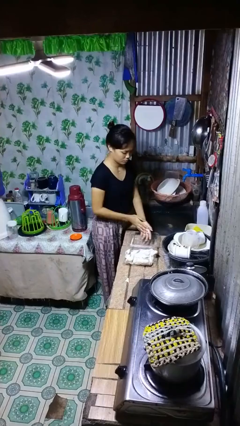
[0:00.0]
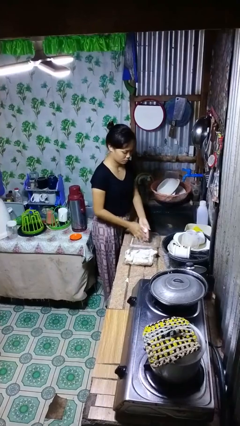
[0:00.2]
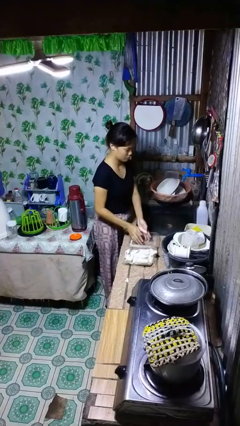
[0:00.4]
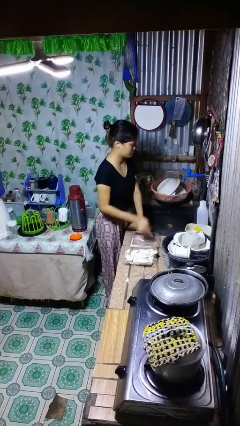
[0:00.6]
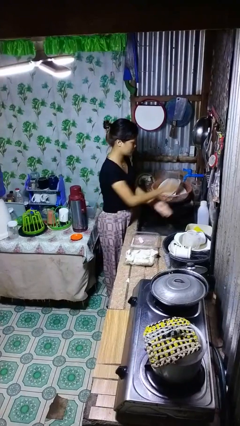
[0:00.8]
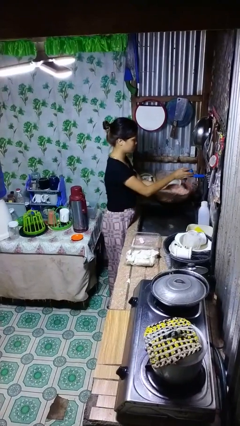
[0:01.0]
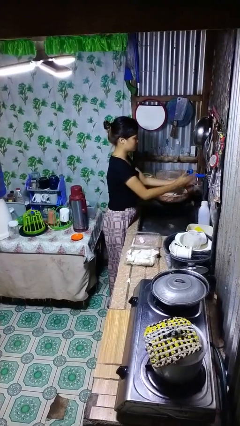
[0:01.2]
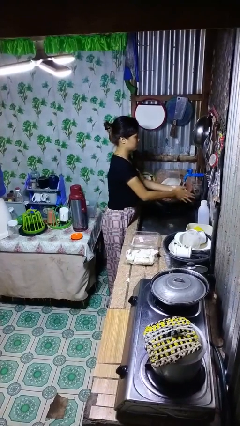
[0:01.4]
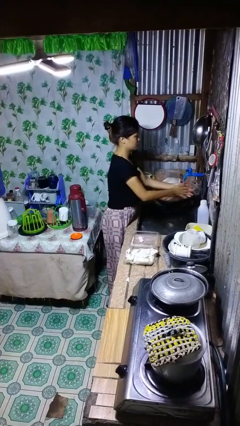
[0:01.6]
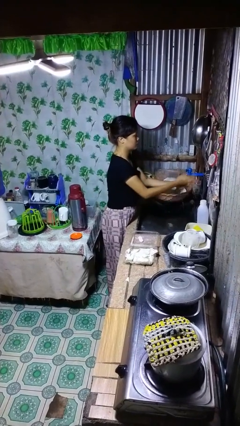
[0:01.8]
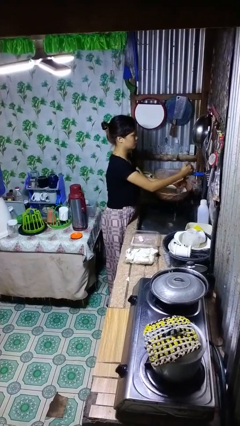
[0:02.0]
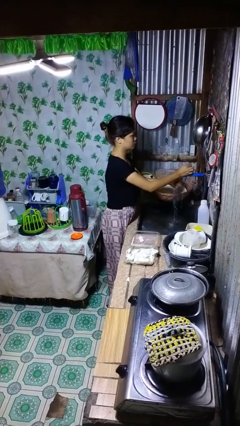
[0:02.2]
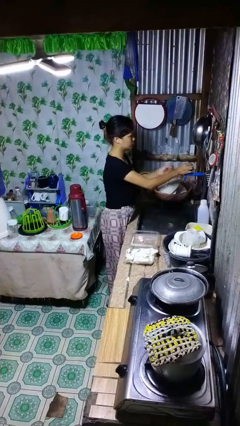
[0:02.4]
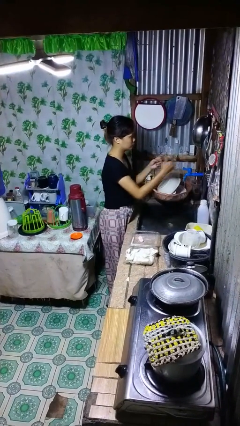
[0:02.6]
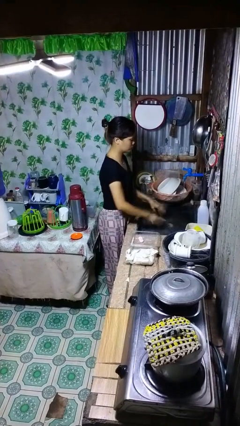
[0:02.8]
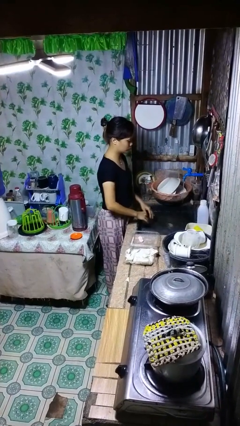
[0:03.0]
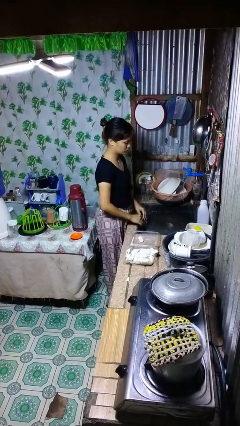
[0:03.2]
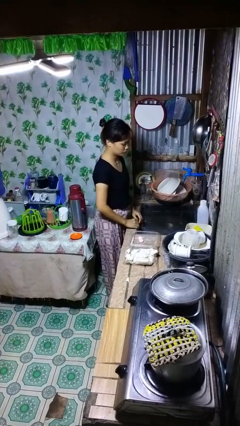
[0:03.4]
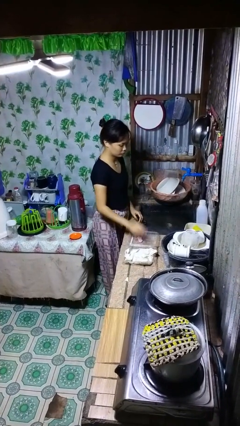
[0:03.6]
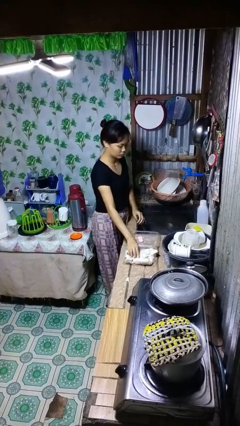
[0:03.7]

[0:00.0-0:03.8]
person washes hands

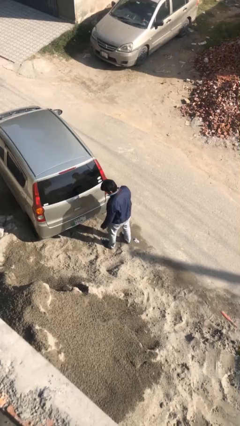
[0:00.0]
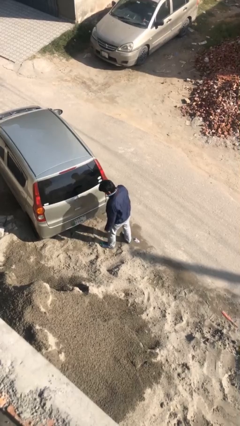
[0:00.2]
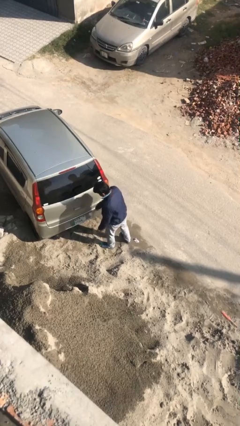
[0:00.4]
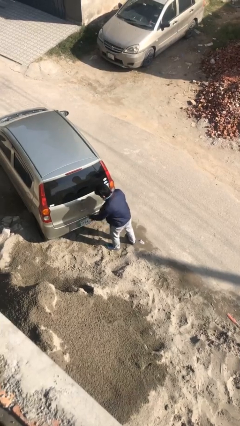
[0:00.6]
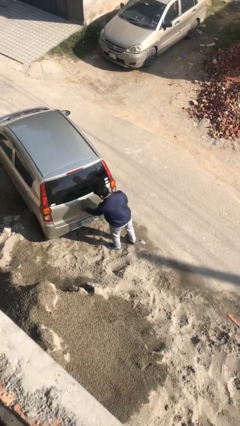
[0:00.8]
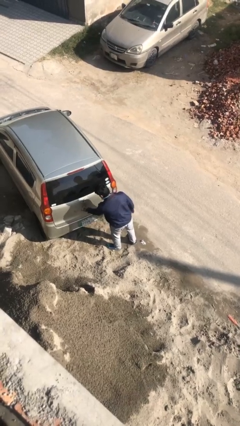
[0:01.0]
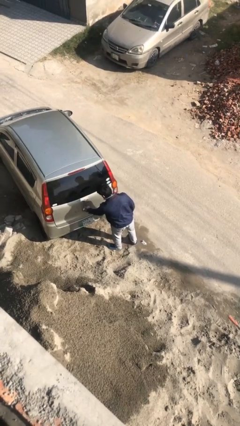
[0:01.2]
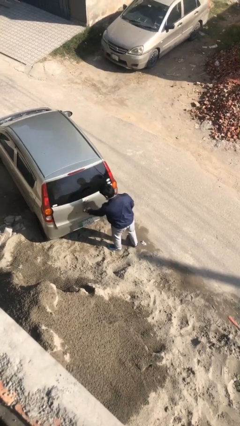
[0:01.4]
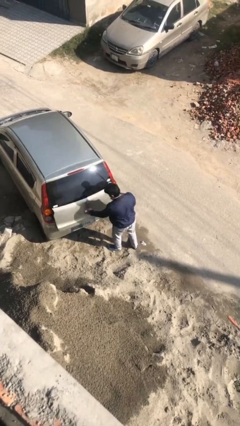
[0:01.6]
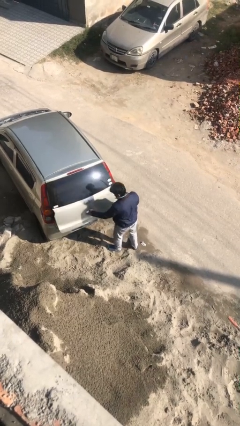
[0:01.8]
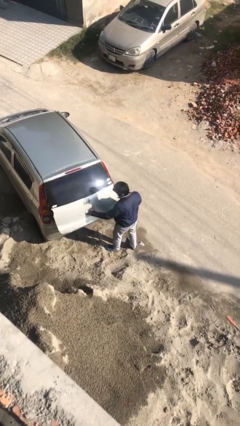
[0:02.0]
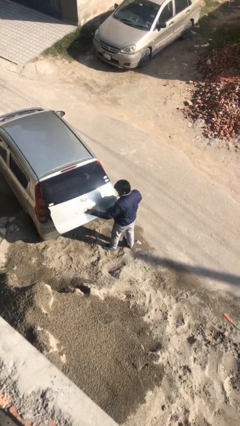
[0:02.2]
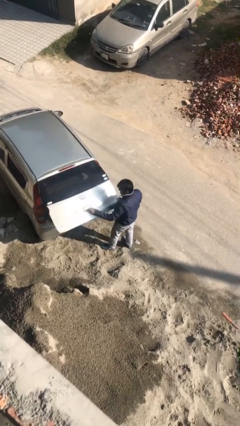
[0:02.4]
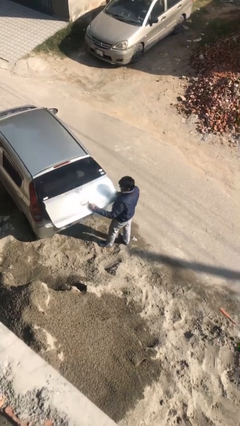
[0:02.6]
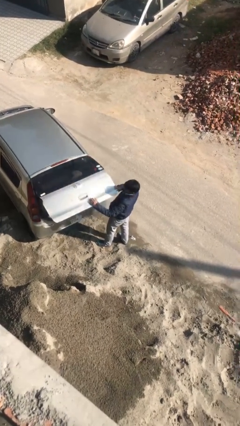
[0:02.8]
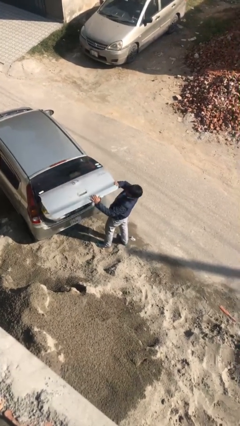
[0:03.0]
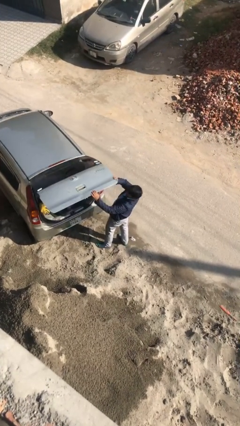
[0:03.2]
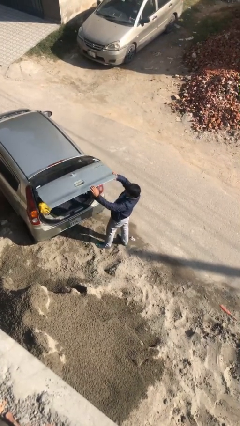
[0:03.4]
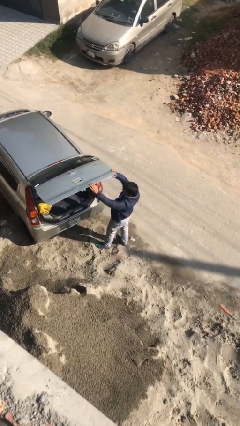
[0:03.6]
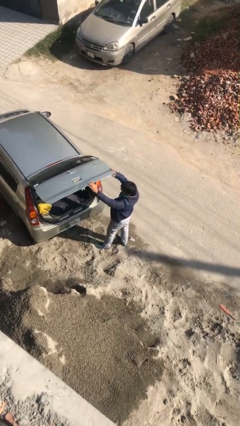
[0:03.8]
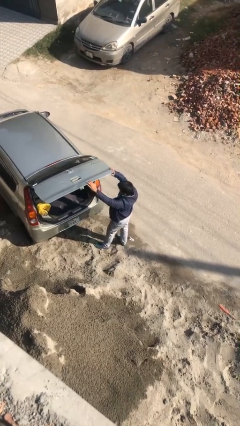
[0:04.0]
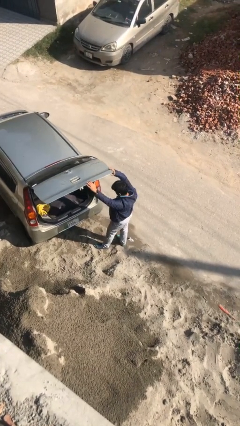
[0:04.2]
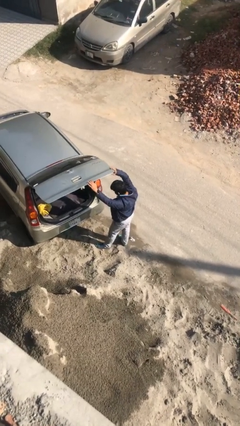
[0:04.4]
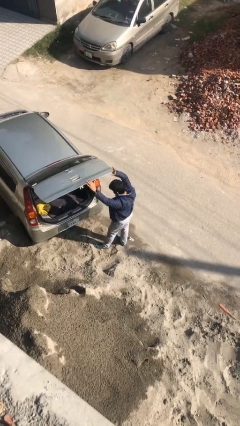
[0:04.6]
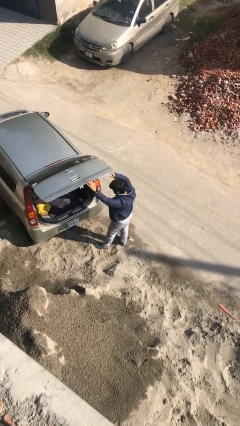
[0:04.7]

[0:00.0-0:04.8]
person opens car trunk

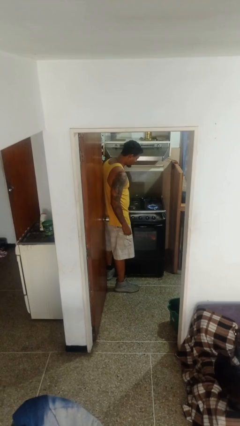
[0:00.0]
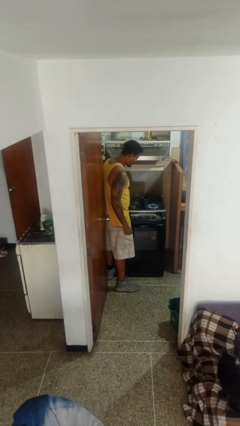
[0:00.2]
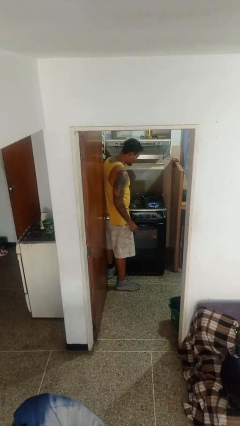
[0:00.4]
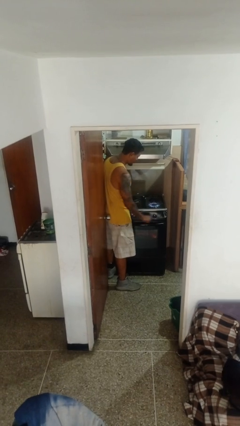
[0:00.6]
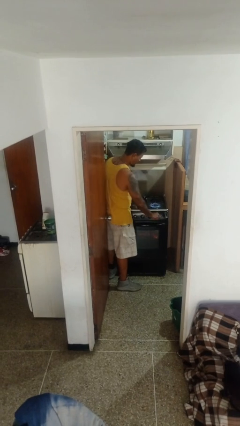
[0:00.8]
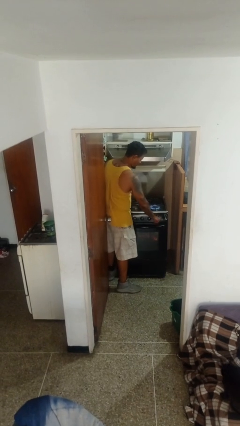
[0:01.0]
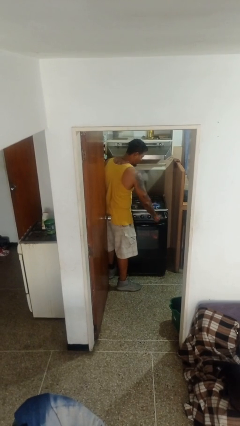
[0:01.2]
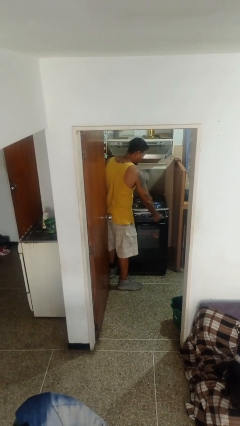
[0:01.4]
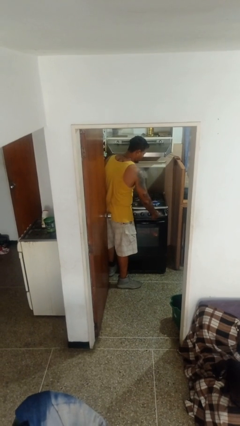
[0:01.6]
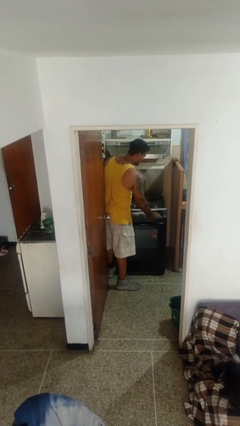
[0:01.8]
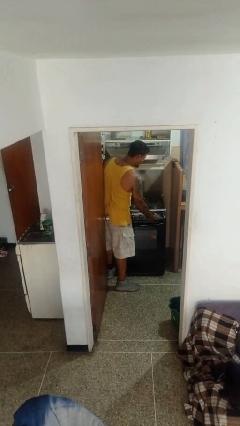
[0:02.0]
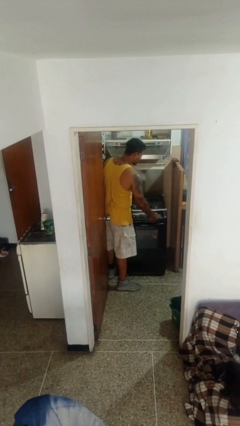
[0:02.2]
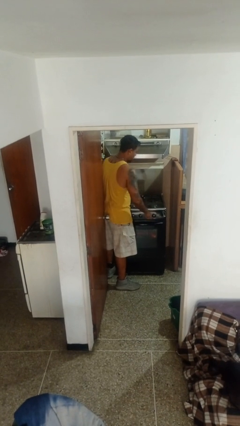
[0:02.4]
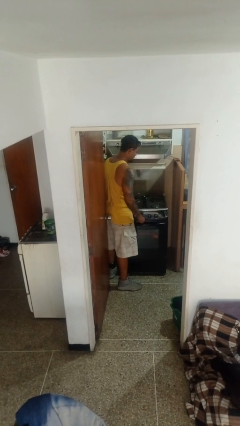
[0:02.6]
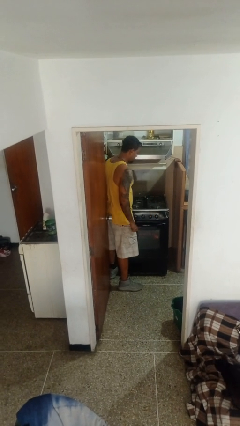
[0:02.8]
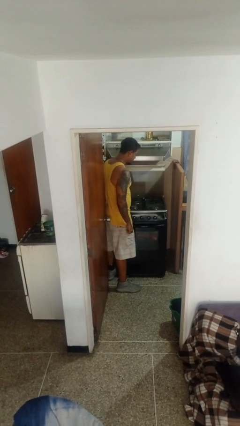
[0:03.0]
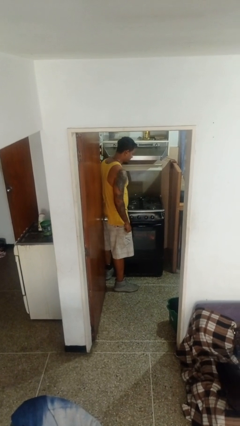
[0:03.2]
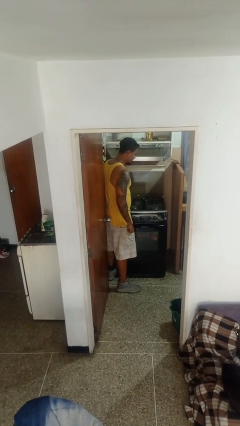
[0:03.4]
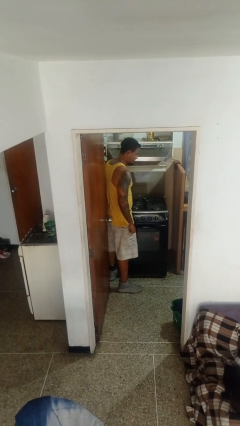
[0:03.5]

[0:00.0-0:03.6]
person turns off stovetop

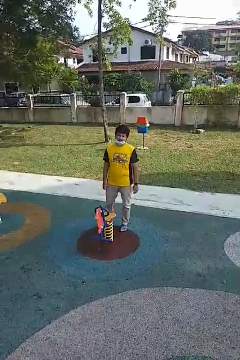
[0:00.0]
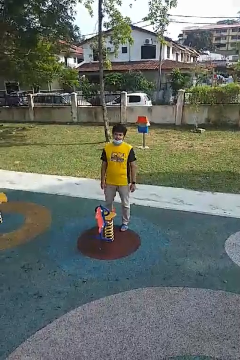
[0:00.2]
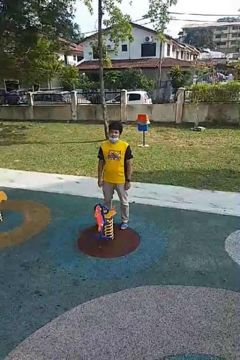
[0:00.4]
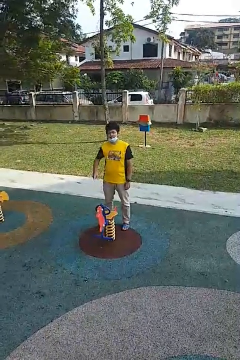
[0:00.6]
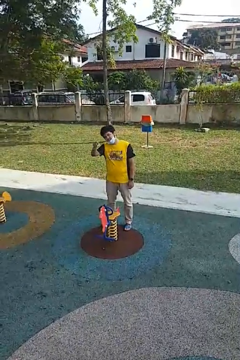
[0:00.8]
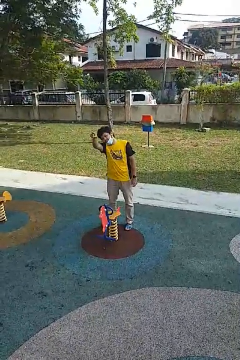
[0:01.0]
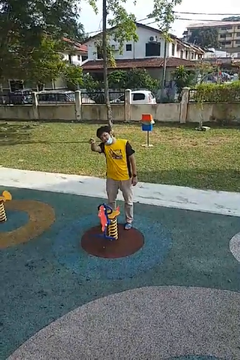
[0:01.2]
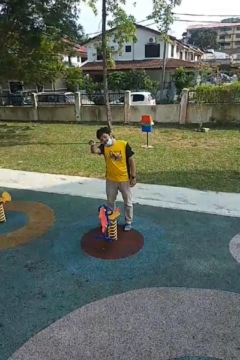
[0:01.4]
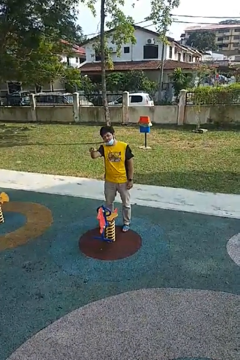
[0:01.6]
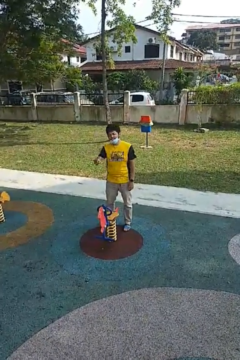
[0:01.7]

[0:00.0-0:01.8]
person points at person

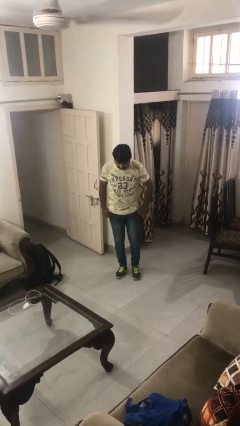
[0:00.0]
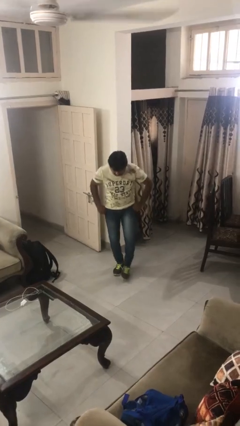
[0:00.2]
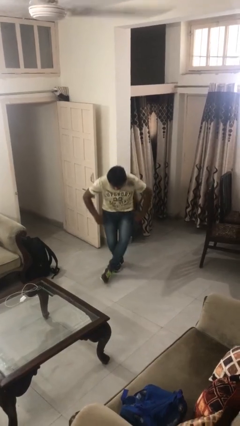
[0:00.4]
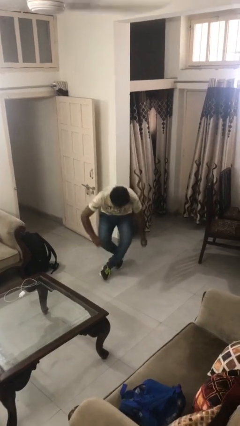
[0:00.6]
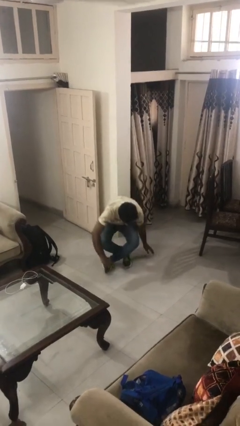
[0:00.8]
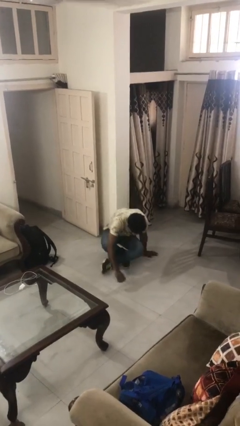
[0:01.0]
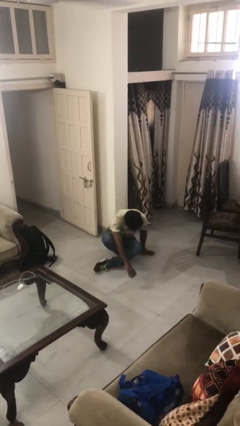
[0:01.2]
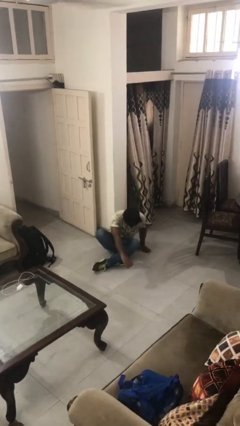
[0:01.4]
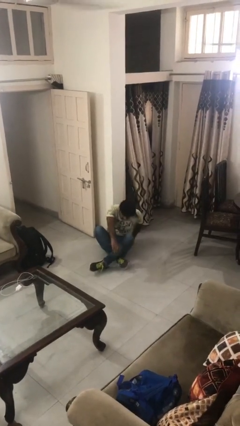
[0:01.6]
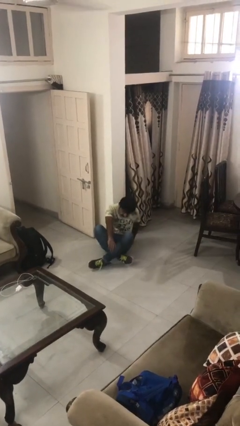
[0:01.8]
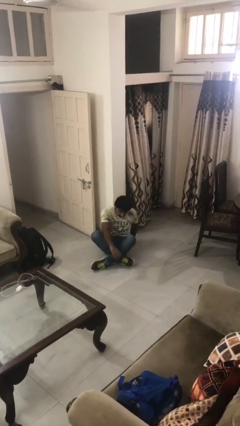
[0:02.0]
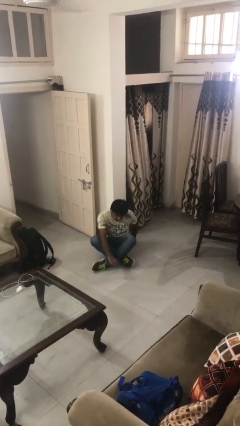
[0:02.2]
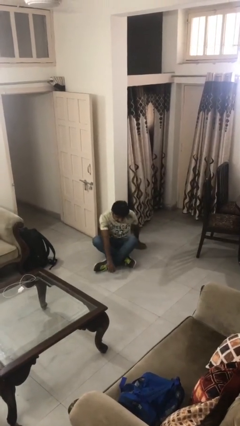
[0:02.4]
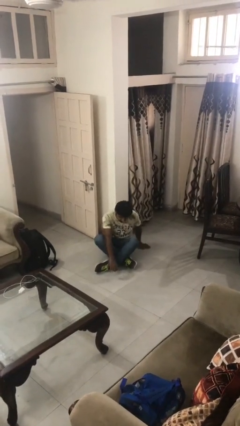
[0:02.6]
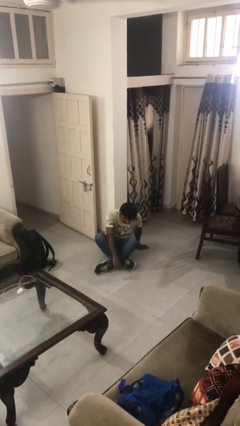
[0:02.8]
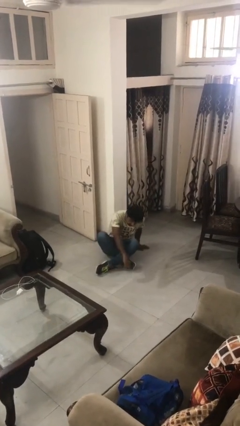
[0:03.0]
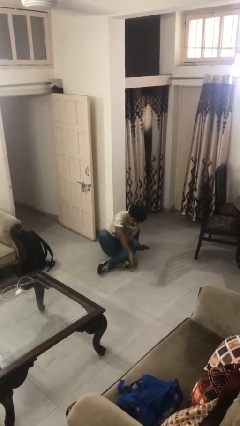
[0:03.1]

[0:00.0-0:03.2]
person sits crisscross

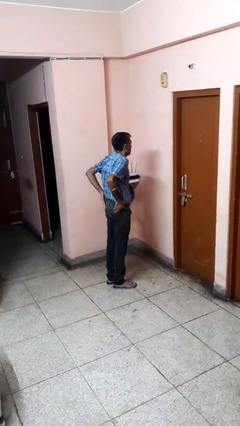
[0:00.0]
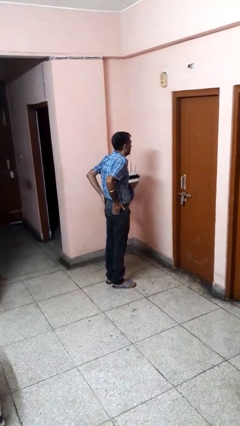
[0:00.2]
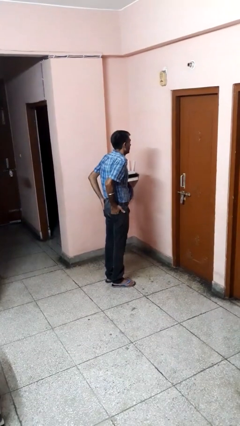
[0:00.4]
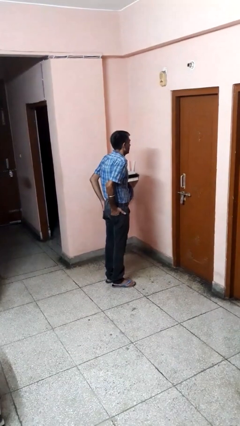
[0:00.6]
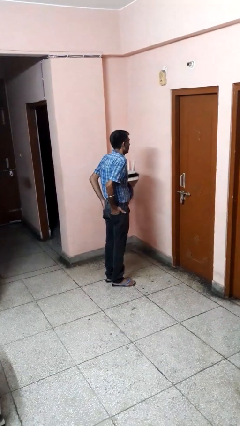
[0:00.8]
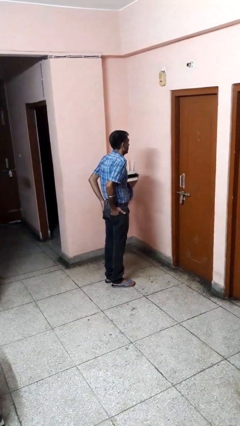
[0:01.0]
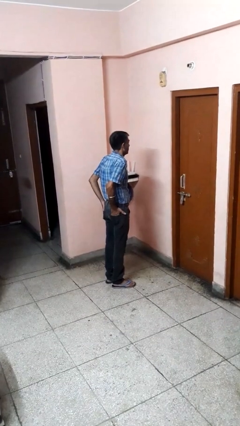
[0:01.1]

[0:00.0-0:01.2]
person puts hands in back pockets
